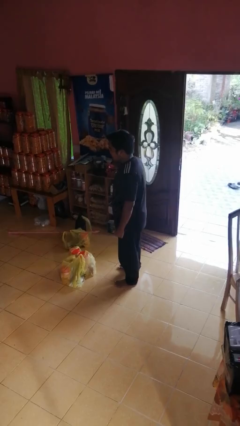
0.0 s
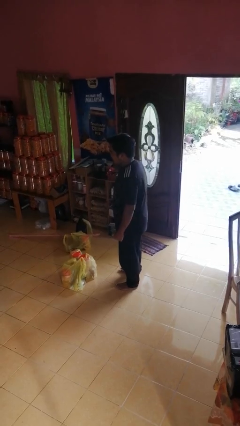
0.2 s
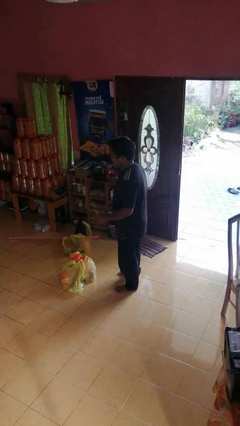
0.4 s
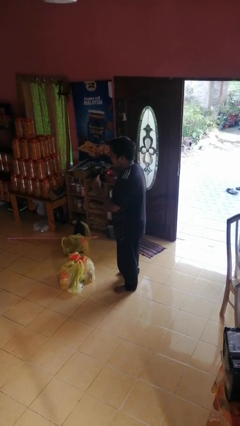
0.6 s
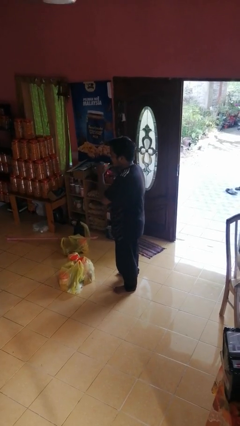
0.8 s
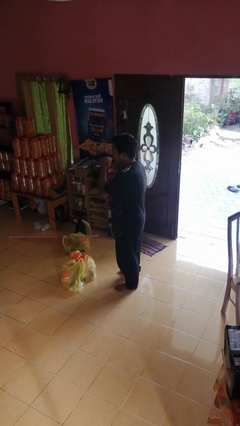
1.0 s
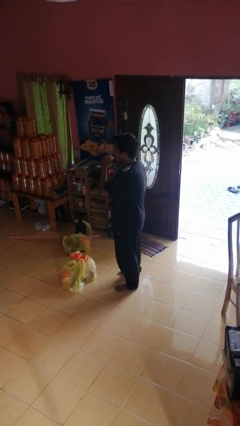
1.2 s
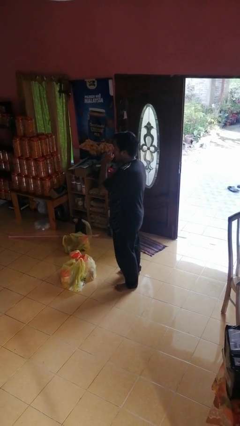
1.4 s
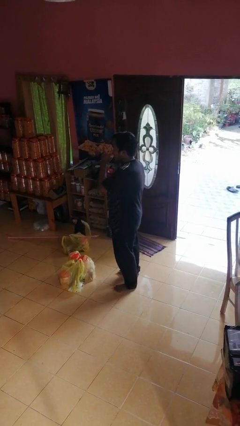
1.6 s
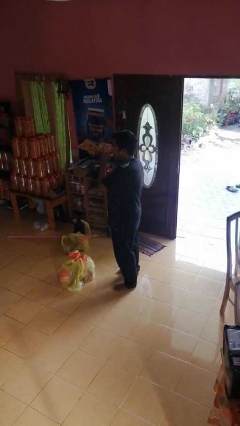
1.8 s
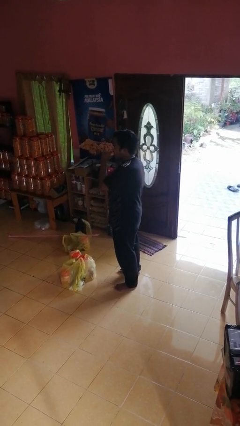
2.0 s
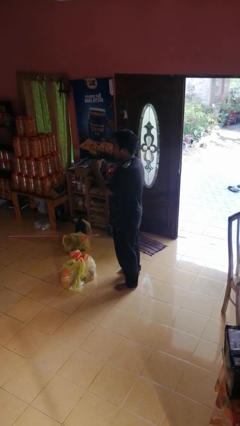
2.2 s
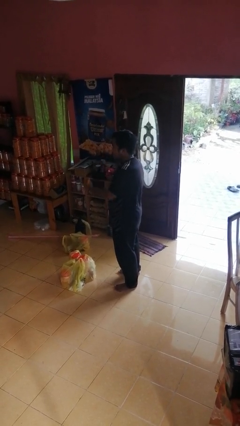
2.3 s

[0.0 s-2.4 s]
person eats banana

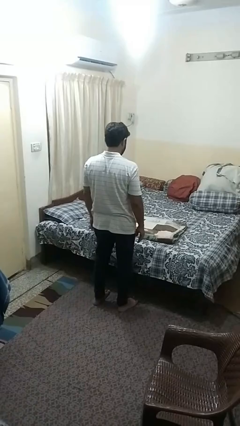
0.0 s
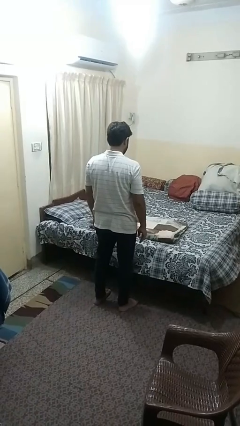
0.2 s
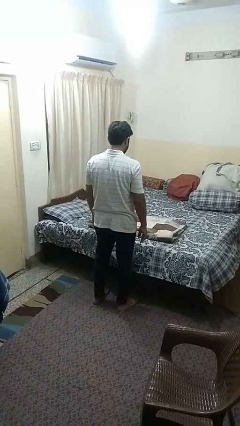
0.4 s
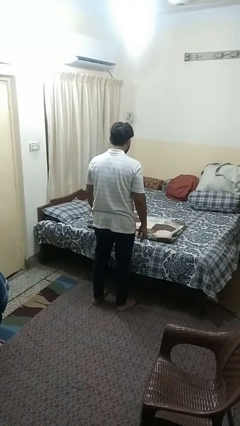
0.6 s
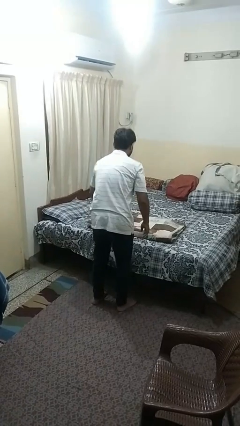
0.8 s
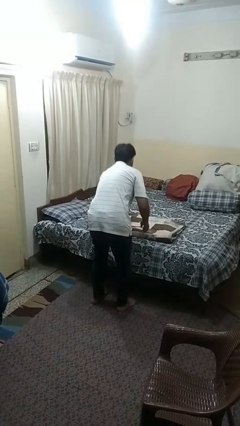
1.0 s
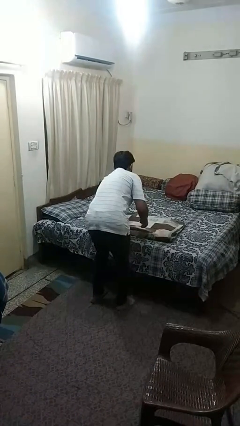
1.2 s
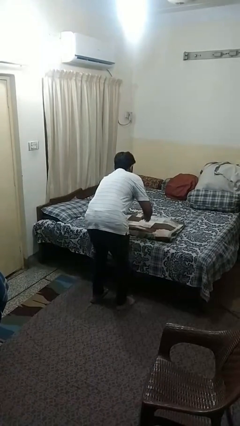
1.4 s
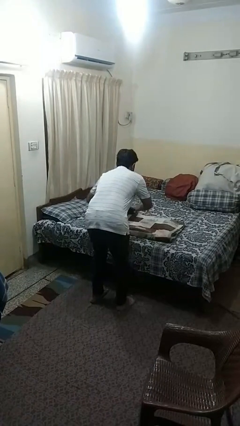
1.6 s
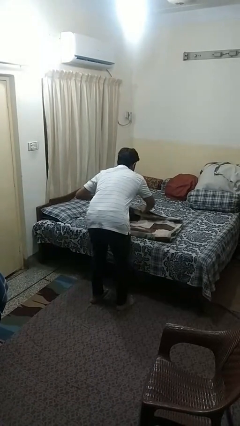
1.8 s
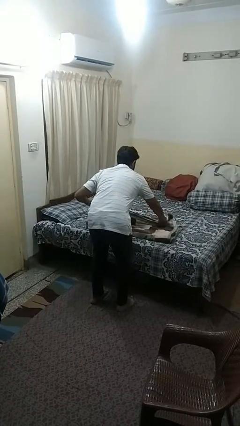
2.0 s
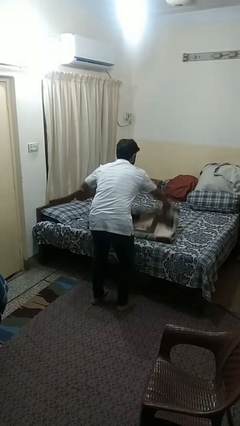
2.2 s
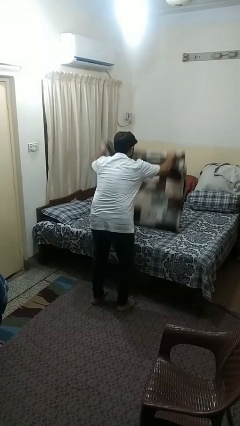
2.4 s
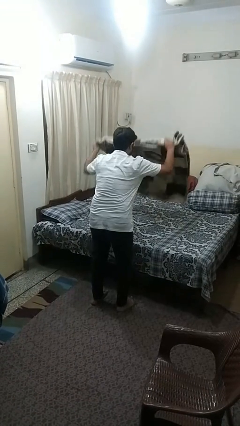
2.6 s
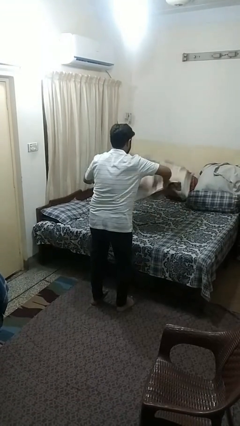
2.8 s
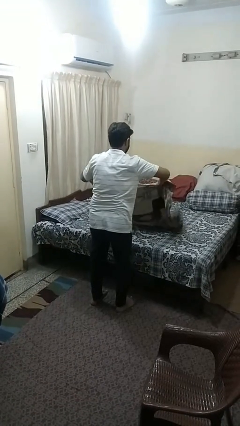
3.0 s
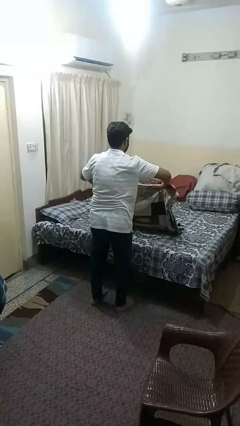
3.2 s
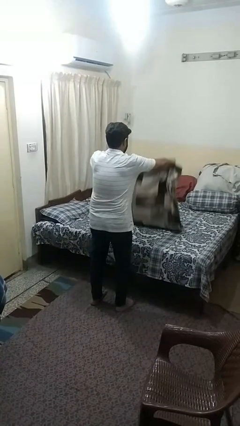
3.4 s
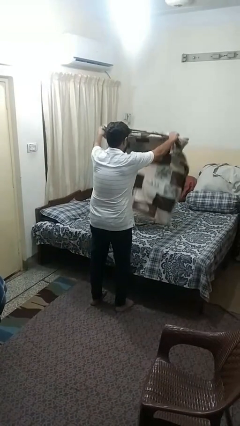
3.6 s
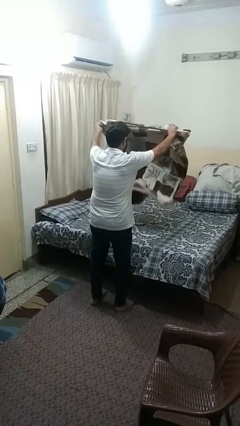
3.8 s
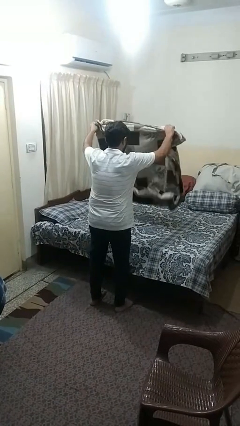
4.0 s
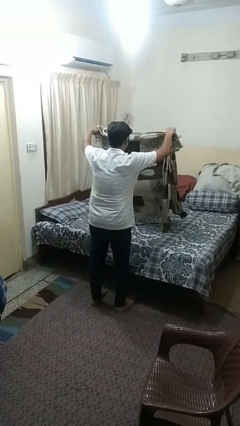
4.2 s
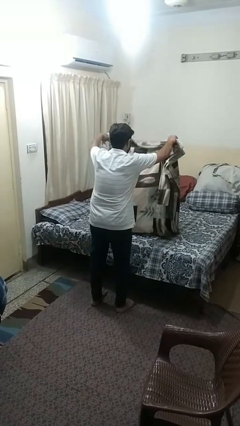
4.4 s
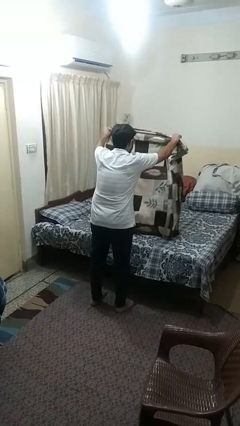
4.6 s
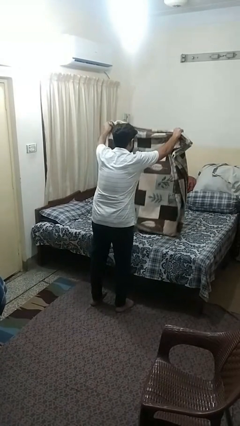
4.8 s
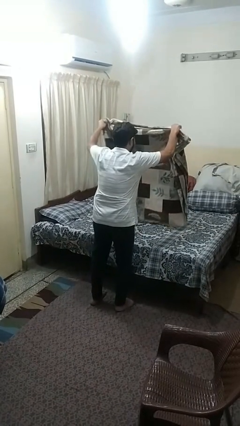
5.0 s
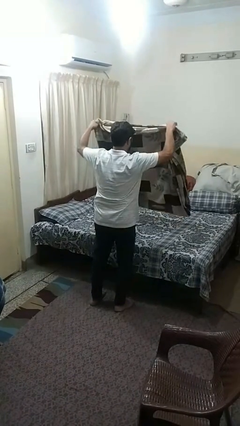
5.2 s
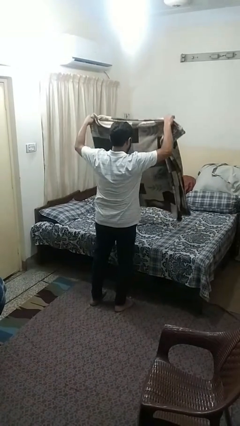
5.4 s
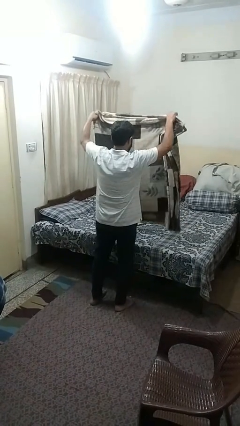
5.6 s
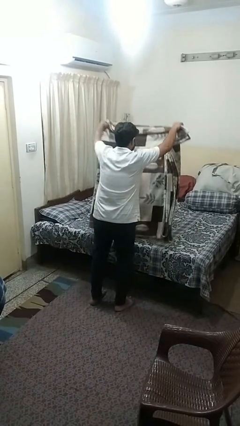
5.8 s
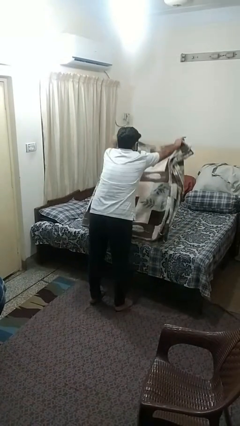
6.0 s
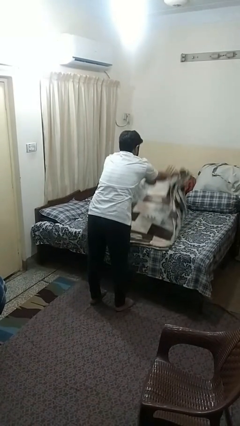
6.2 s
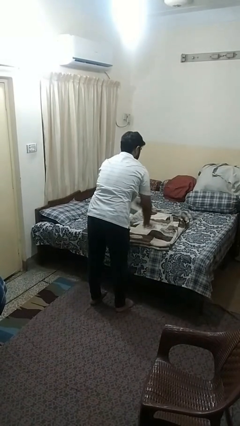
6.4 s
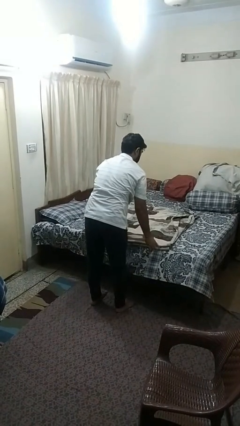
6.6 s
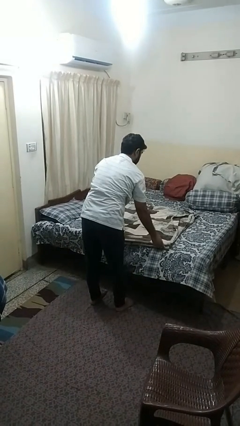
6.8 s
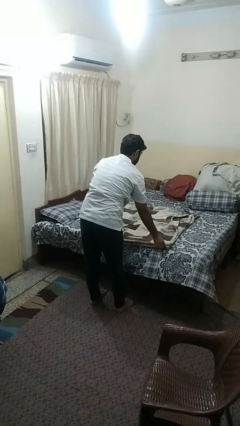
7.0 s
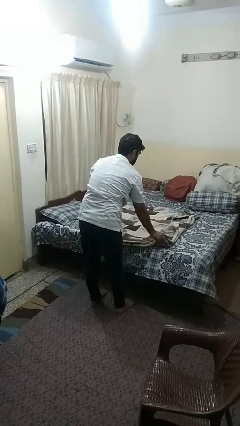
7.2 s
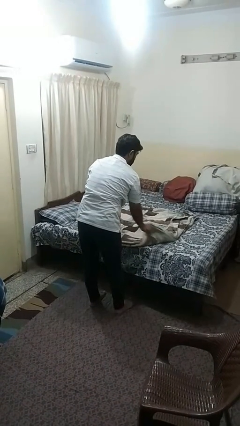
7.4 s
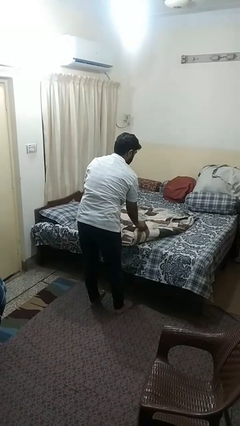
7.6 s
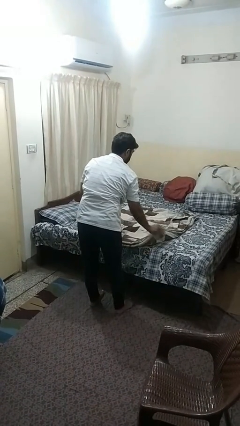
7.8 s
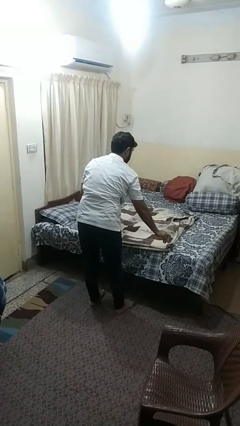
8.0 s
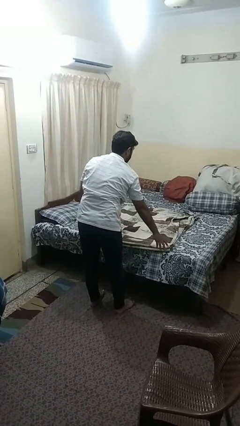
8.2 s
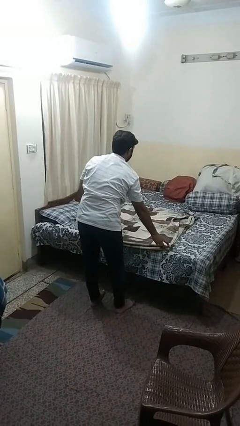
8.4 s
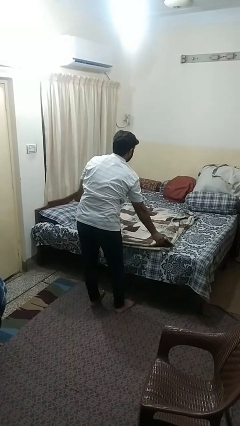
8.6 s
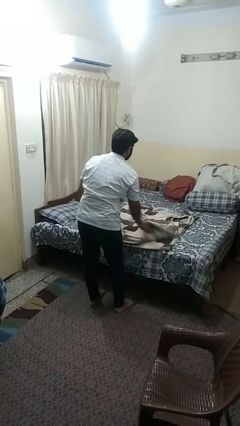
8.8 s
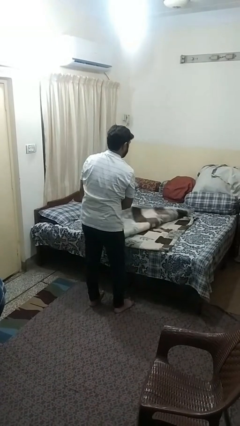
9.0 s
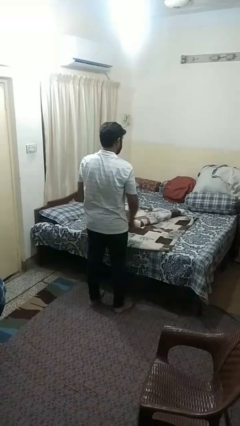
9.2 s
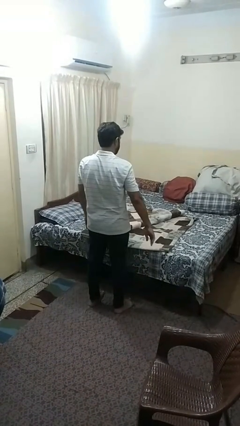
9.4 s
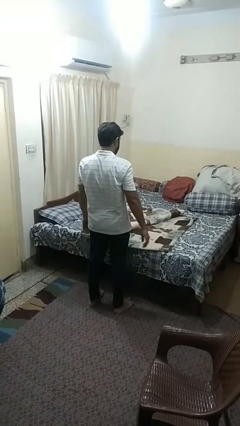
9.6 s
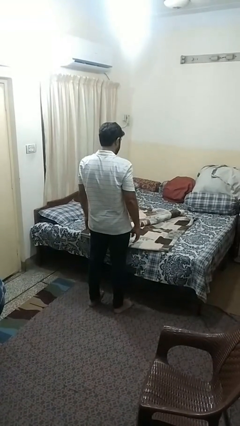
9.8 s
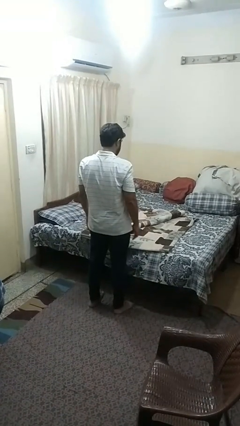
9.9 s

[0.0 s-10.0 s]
person unfolds blanket

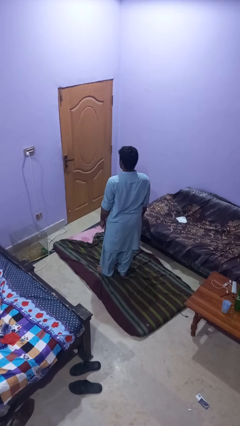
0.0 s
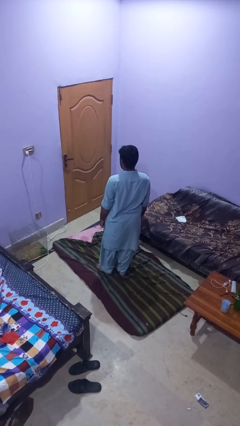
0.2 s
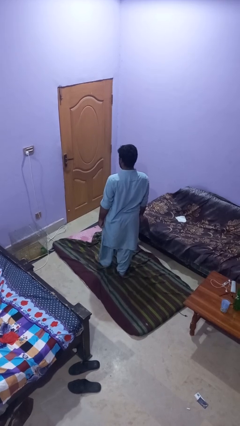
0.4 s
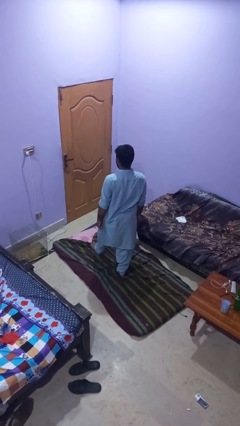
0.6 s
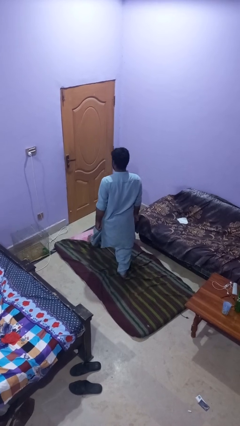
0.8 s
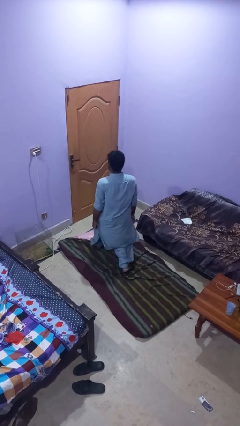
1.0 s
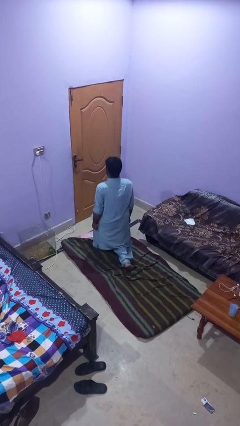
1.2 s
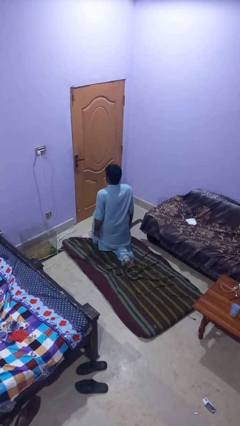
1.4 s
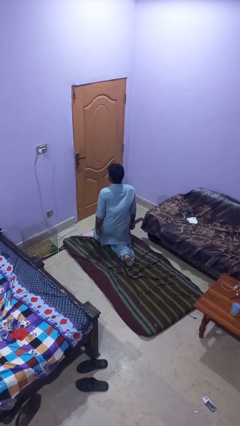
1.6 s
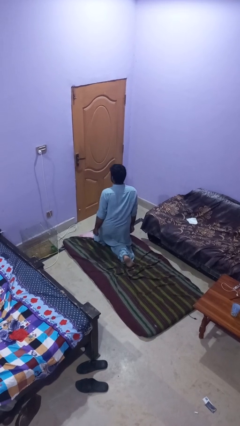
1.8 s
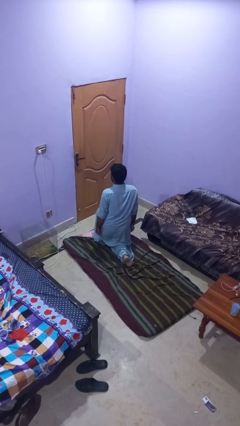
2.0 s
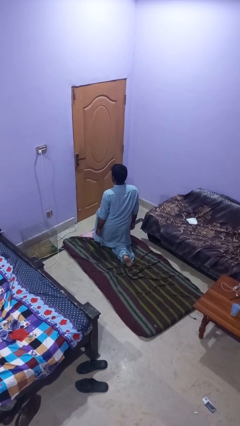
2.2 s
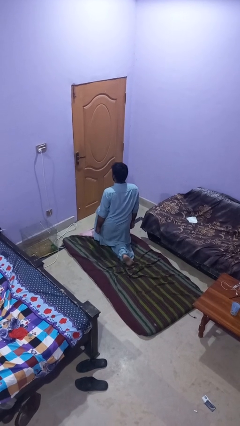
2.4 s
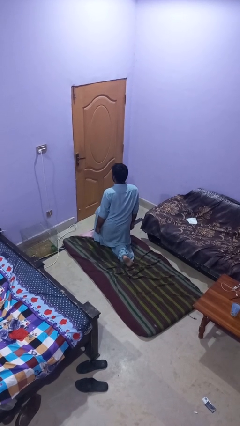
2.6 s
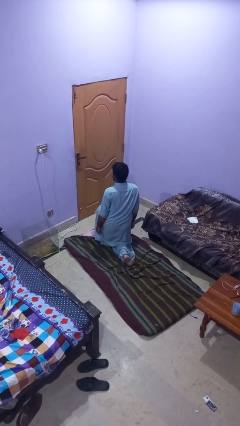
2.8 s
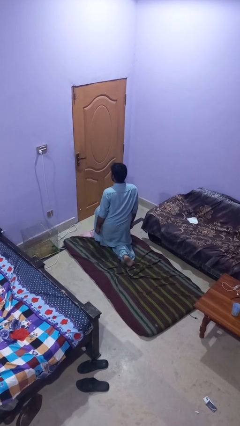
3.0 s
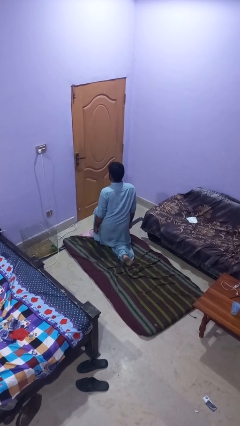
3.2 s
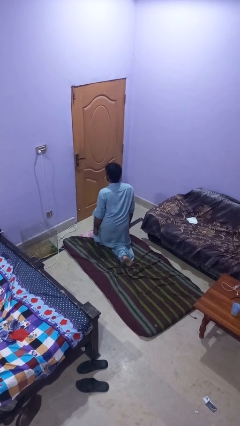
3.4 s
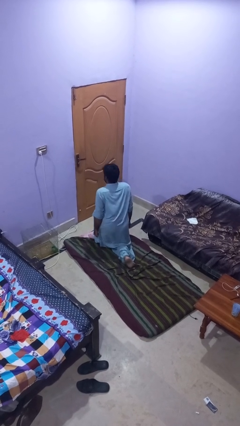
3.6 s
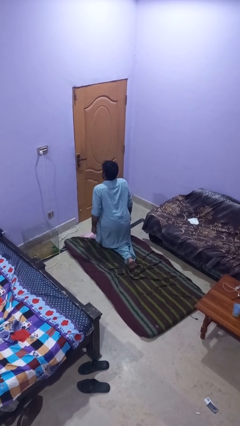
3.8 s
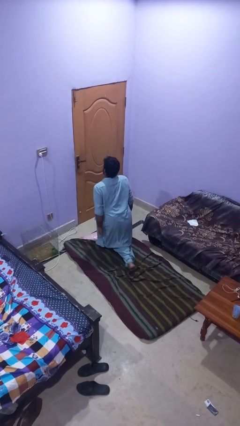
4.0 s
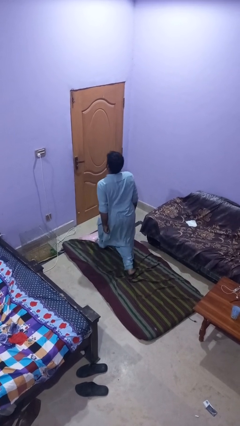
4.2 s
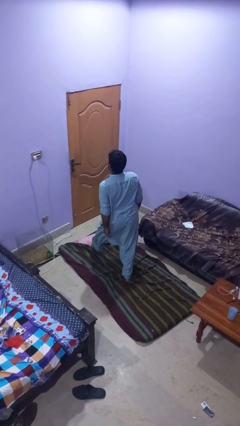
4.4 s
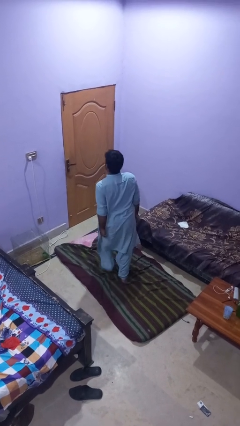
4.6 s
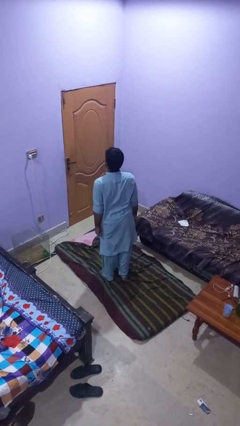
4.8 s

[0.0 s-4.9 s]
person exercises with lunges

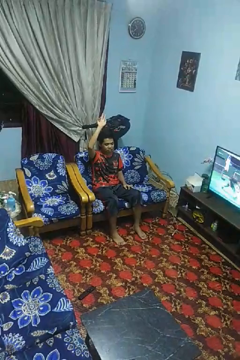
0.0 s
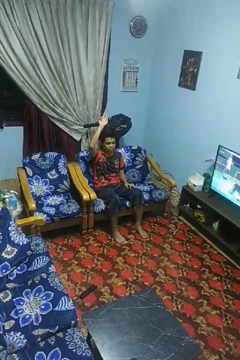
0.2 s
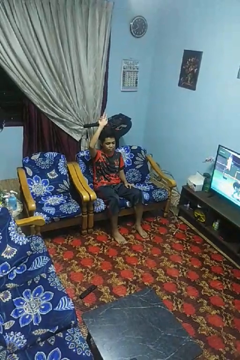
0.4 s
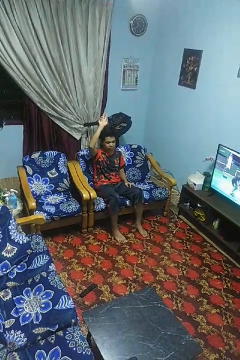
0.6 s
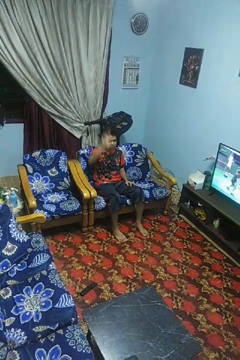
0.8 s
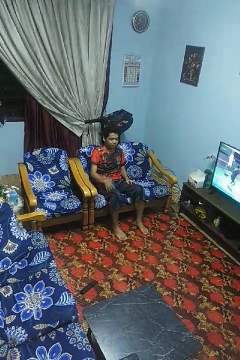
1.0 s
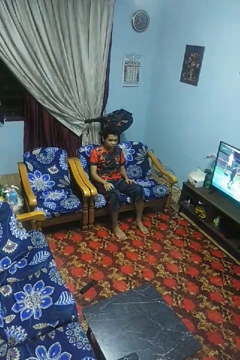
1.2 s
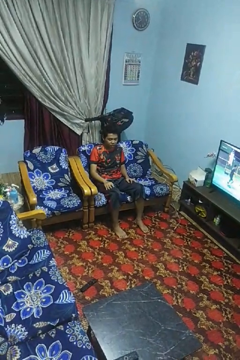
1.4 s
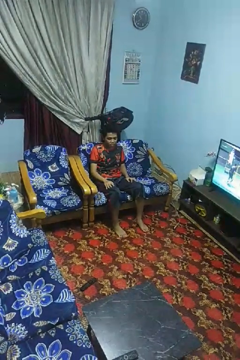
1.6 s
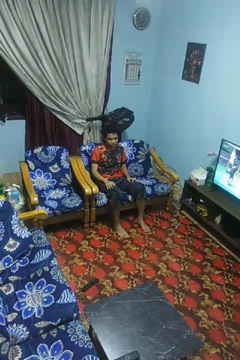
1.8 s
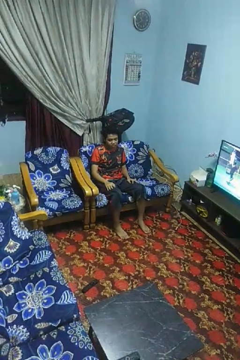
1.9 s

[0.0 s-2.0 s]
person gestures lower hand
